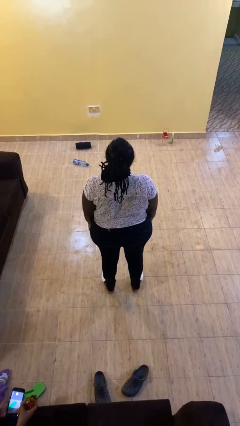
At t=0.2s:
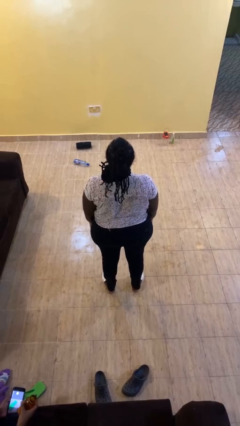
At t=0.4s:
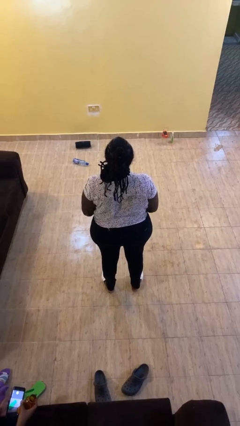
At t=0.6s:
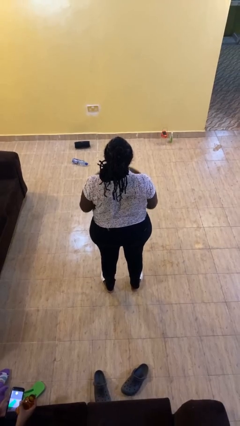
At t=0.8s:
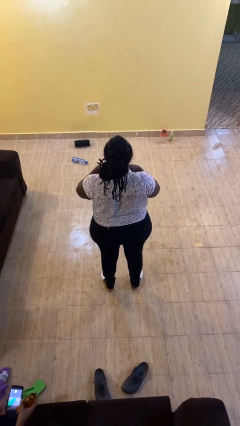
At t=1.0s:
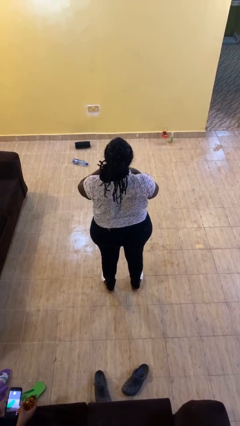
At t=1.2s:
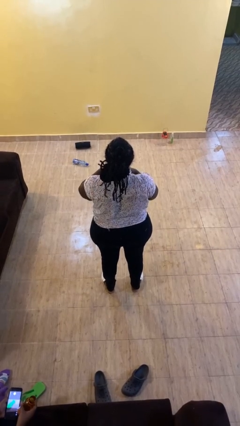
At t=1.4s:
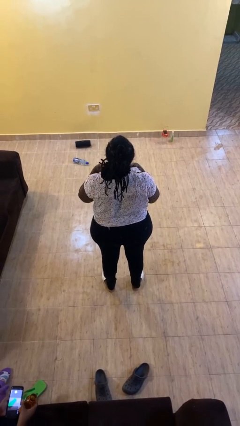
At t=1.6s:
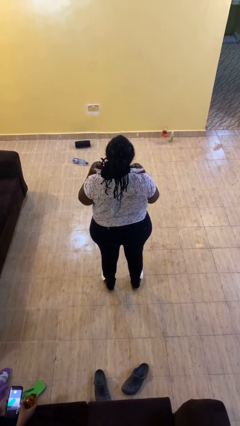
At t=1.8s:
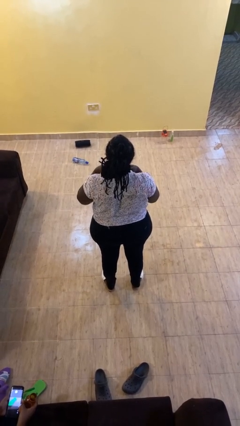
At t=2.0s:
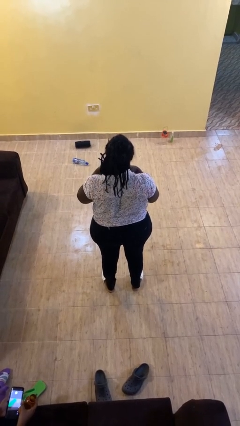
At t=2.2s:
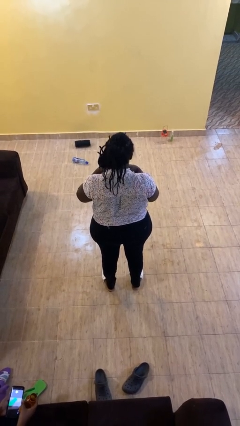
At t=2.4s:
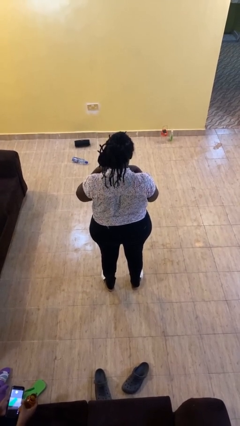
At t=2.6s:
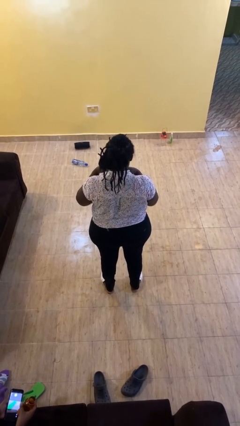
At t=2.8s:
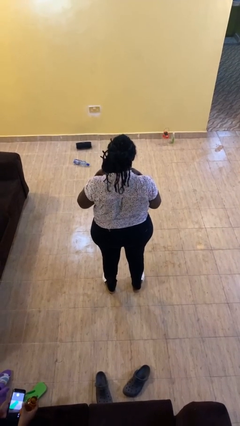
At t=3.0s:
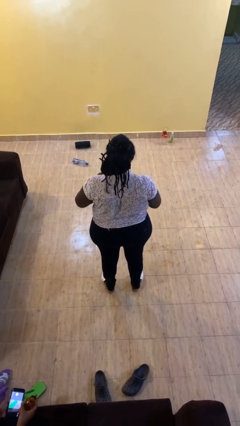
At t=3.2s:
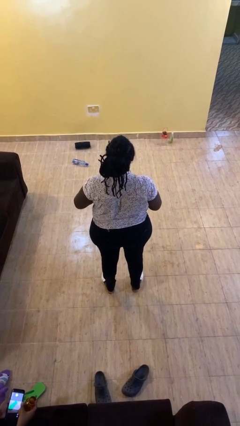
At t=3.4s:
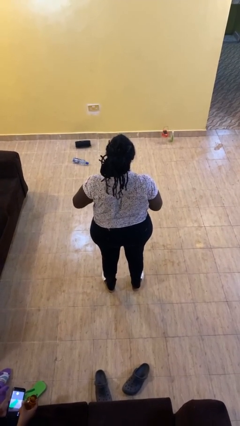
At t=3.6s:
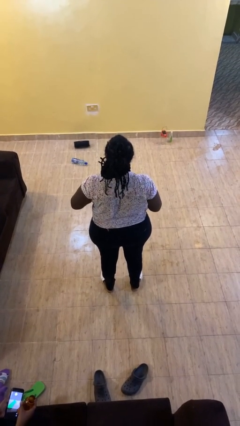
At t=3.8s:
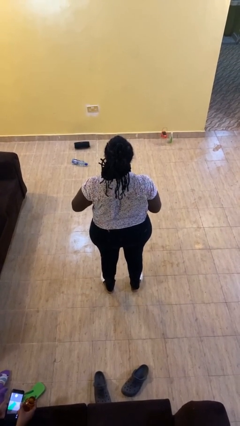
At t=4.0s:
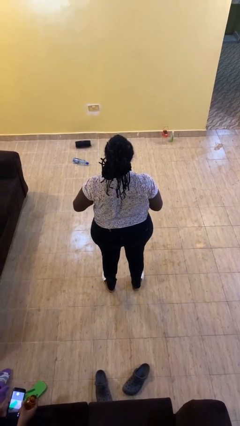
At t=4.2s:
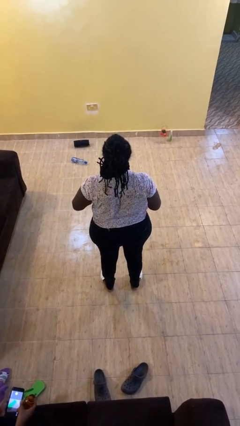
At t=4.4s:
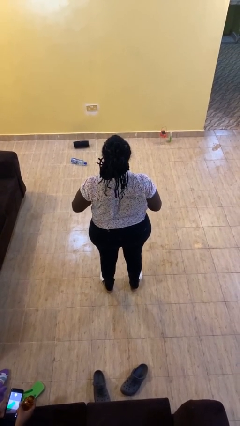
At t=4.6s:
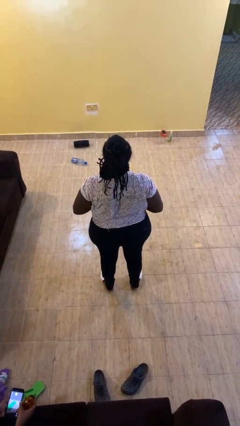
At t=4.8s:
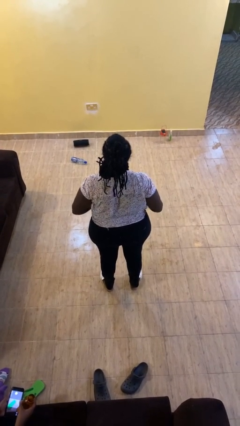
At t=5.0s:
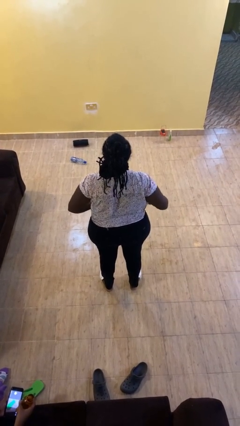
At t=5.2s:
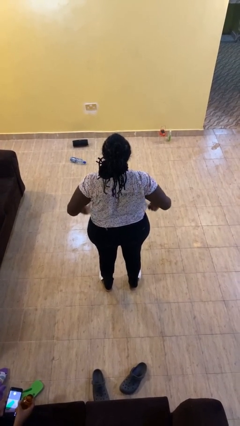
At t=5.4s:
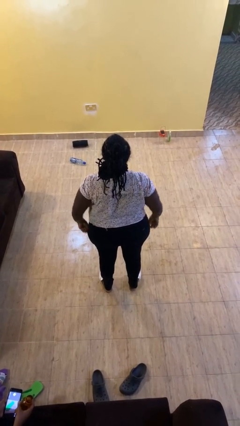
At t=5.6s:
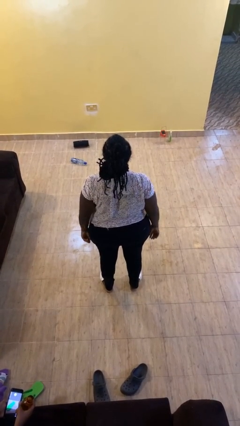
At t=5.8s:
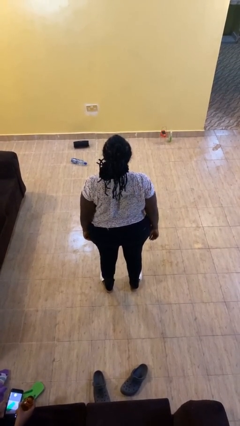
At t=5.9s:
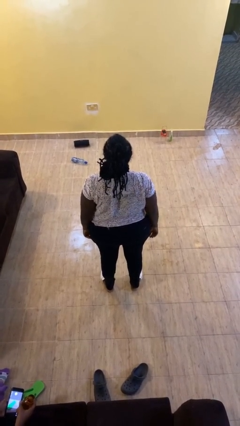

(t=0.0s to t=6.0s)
person unbuttons shirt

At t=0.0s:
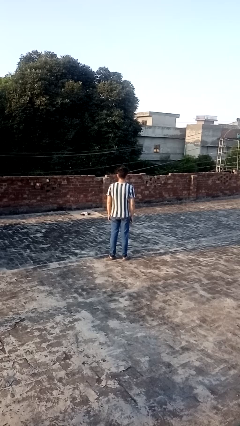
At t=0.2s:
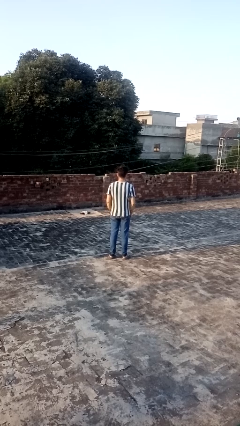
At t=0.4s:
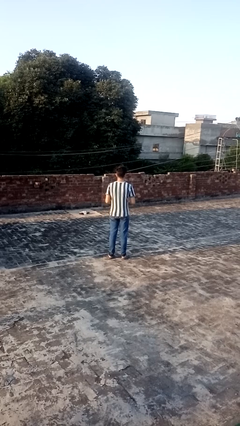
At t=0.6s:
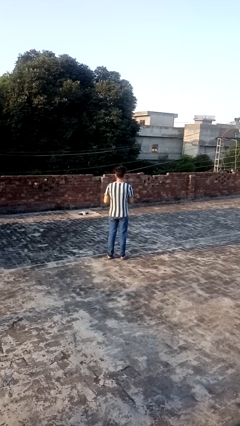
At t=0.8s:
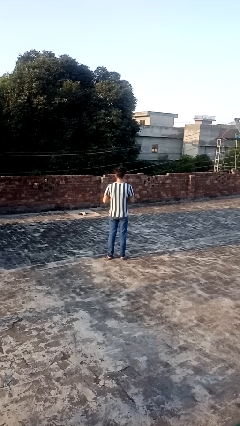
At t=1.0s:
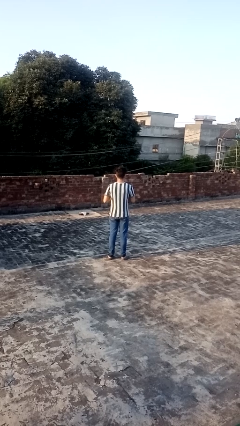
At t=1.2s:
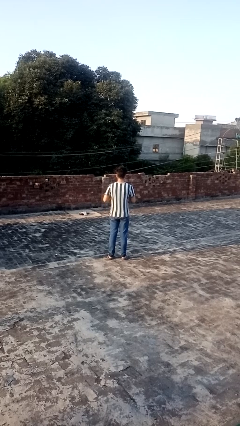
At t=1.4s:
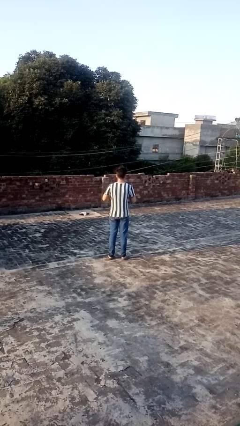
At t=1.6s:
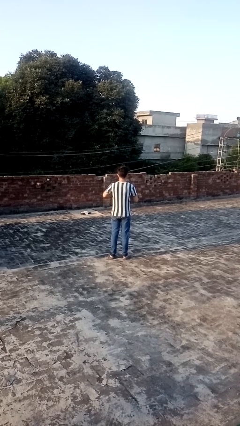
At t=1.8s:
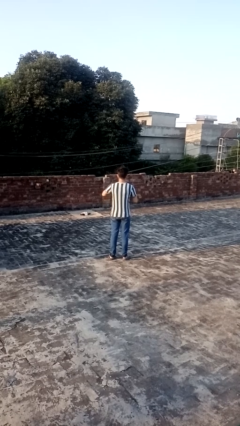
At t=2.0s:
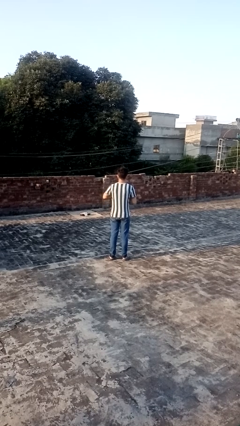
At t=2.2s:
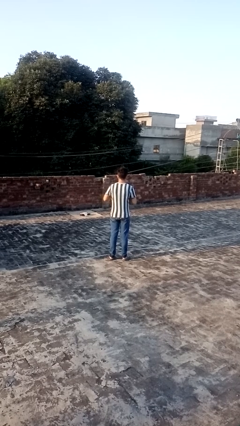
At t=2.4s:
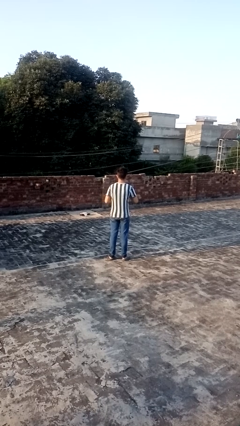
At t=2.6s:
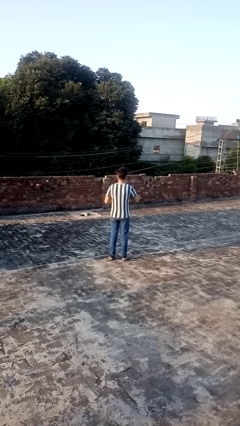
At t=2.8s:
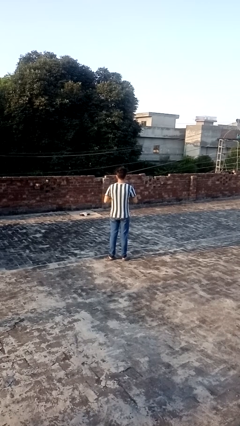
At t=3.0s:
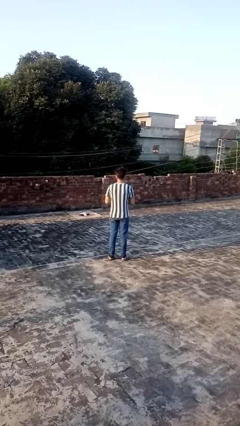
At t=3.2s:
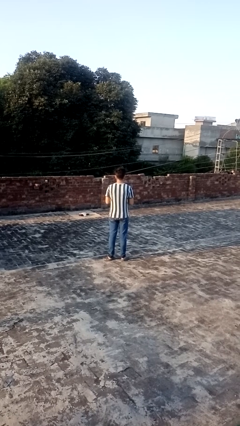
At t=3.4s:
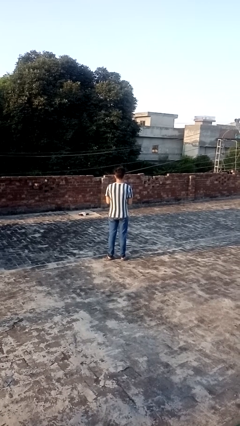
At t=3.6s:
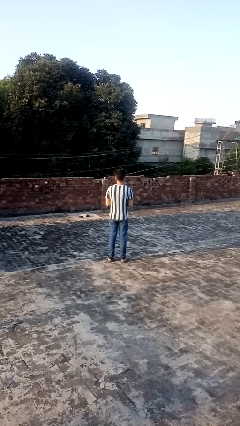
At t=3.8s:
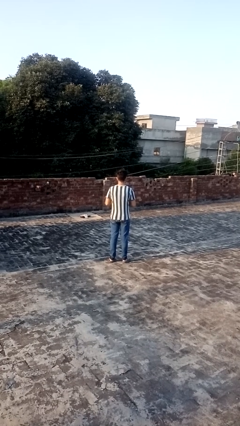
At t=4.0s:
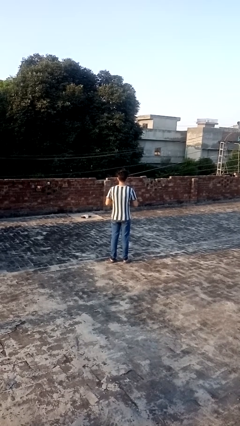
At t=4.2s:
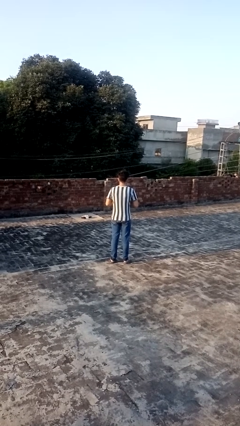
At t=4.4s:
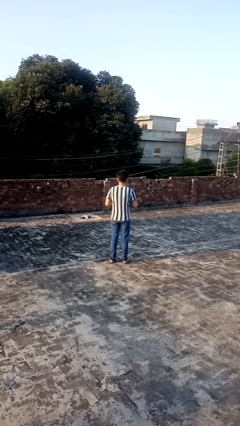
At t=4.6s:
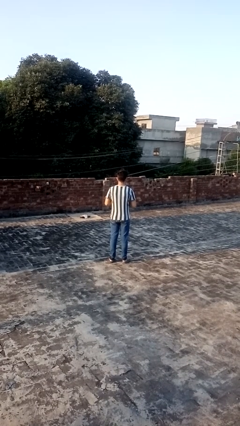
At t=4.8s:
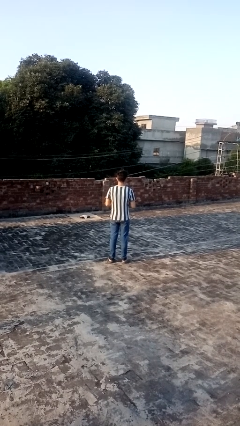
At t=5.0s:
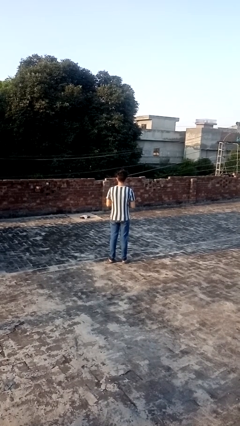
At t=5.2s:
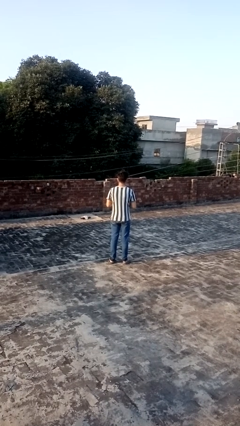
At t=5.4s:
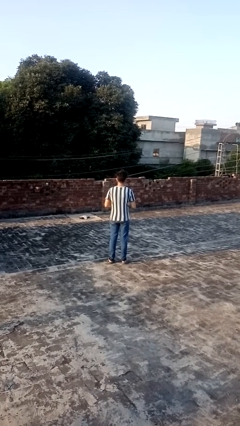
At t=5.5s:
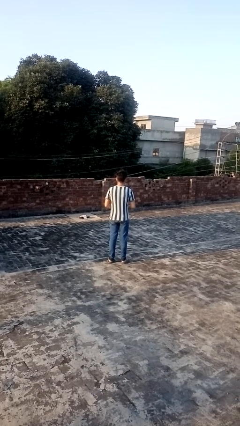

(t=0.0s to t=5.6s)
person cracks knuckles

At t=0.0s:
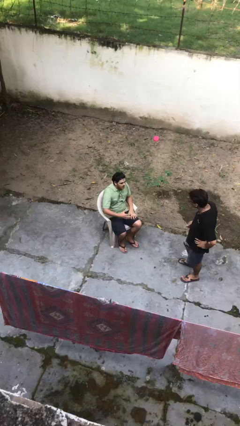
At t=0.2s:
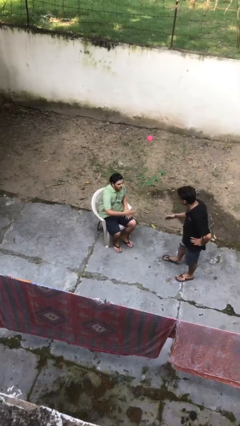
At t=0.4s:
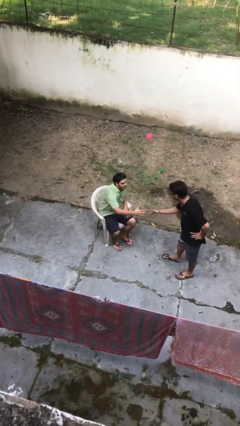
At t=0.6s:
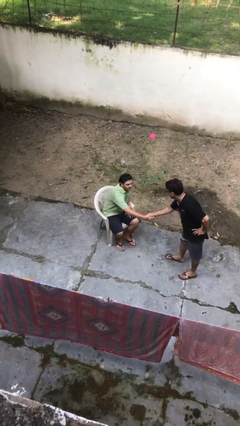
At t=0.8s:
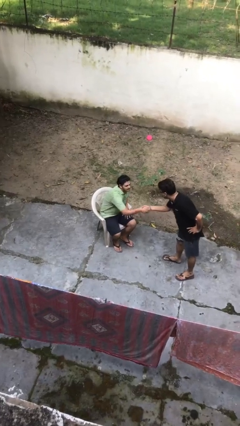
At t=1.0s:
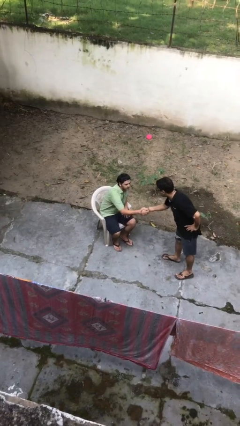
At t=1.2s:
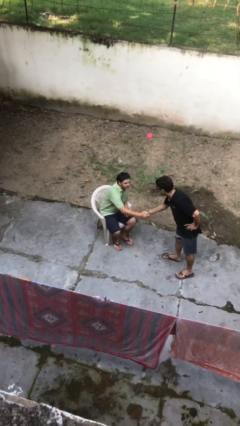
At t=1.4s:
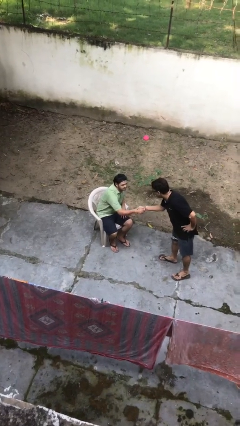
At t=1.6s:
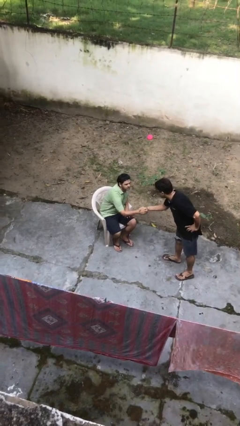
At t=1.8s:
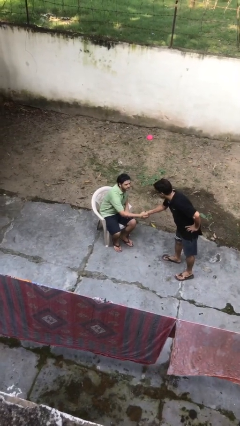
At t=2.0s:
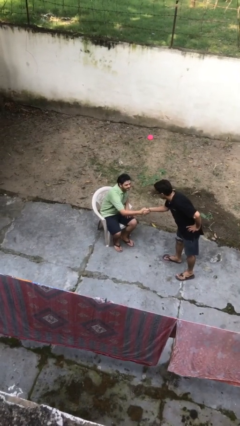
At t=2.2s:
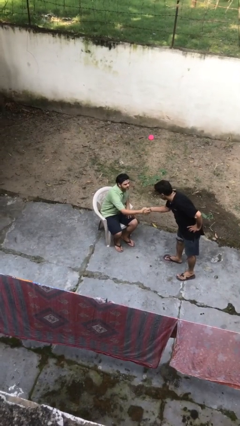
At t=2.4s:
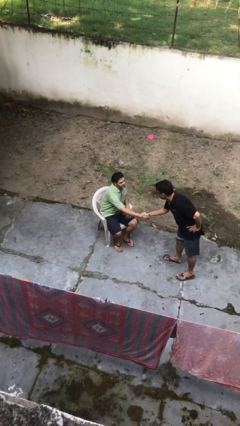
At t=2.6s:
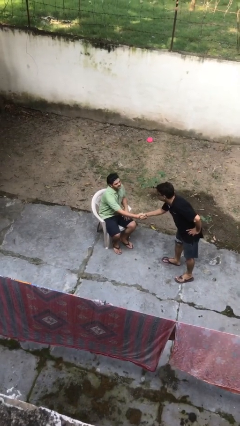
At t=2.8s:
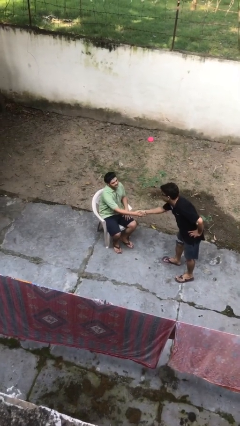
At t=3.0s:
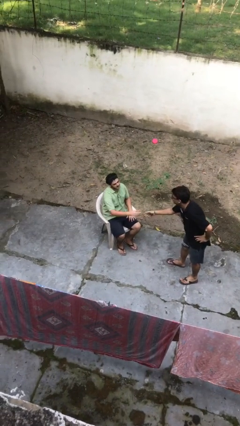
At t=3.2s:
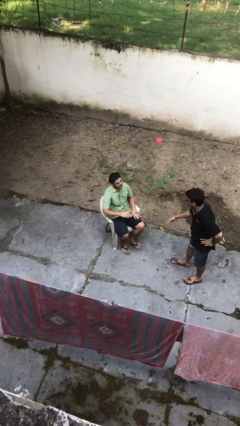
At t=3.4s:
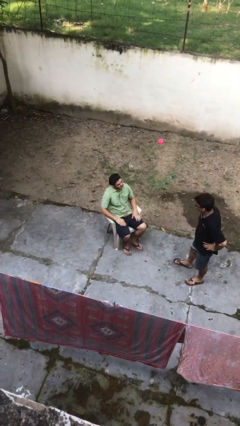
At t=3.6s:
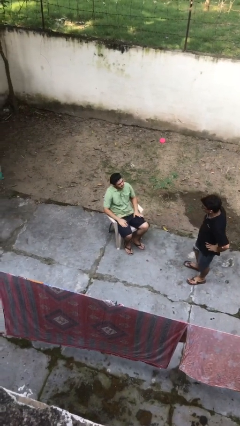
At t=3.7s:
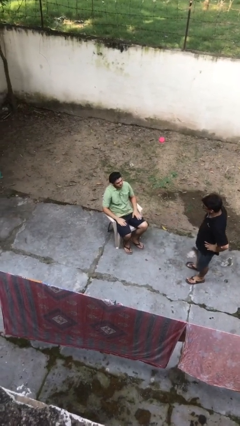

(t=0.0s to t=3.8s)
person shakes hand

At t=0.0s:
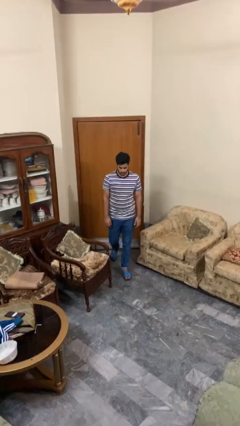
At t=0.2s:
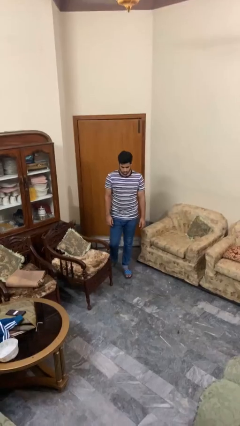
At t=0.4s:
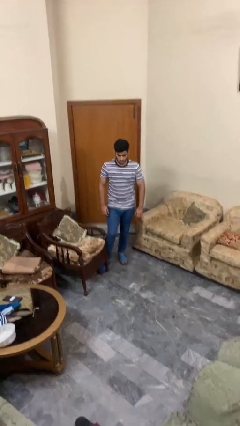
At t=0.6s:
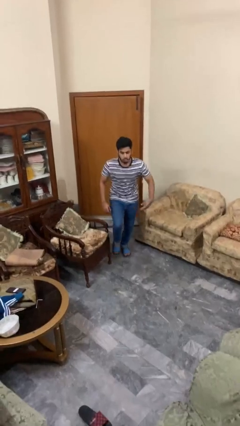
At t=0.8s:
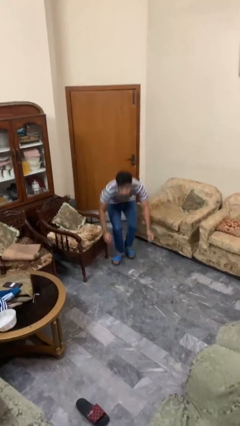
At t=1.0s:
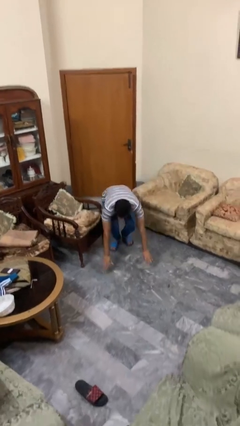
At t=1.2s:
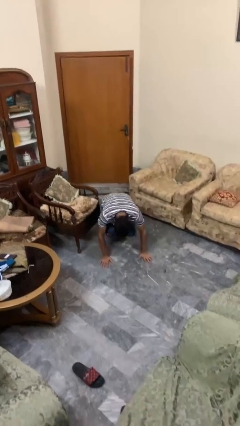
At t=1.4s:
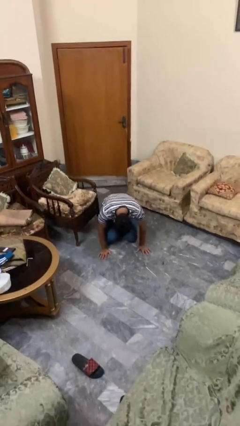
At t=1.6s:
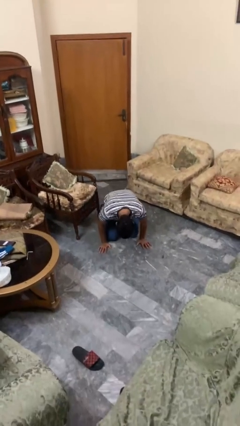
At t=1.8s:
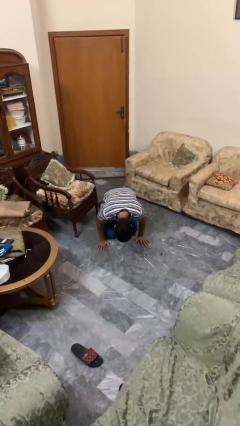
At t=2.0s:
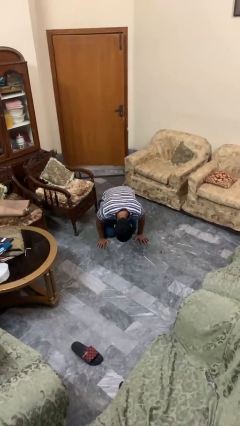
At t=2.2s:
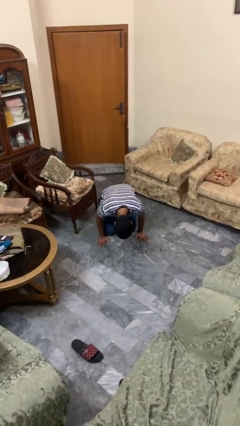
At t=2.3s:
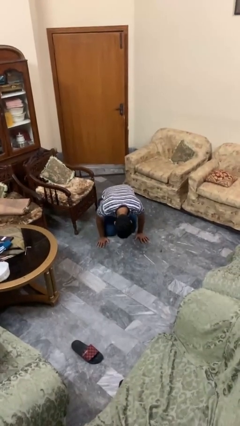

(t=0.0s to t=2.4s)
person trips on object on floor
